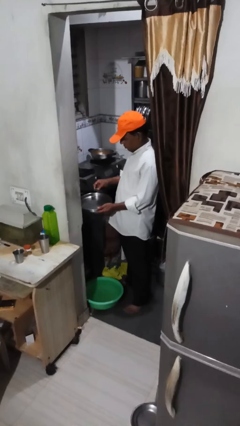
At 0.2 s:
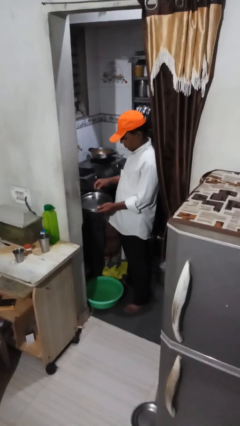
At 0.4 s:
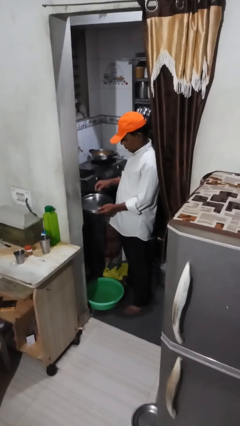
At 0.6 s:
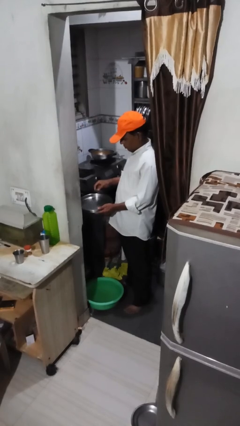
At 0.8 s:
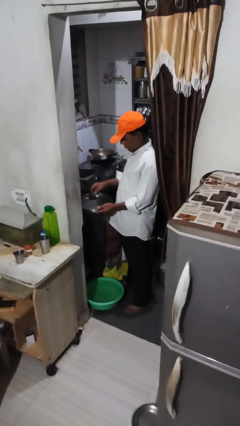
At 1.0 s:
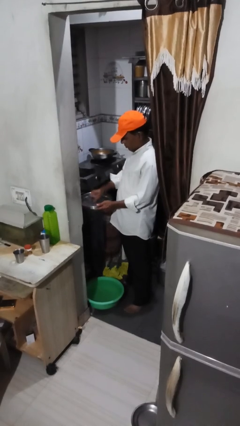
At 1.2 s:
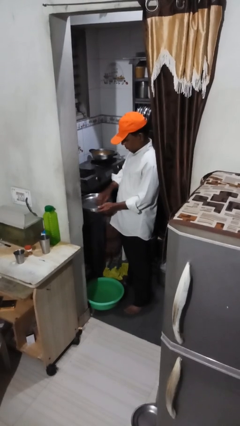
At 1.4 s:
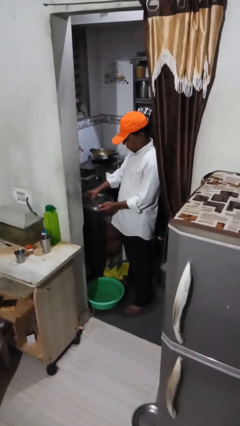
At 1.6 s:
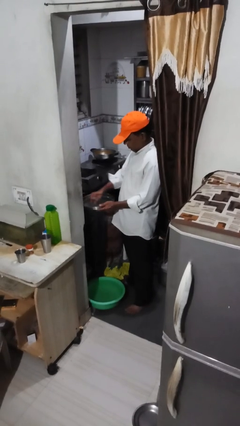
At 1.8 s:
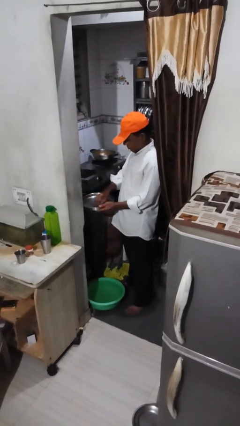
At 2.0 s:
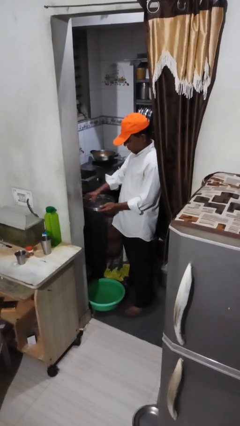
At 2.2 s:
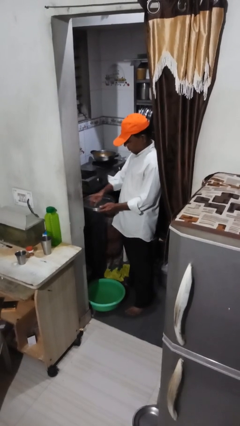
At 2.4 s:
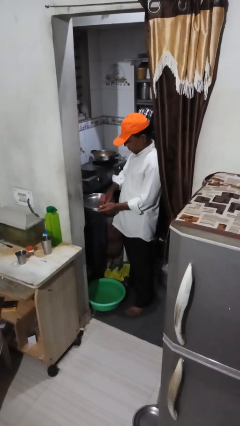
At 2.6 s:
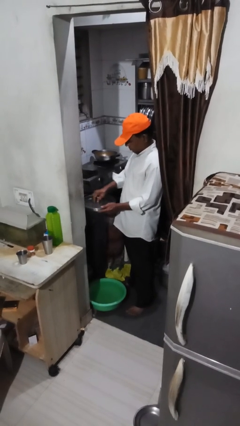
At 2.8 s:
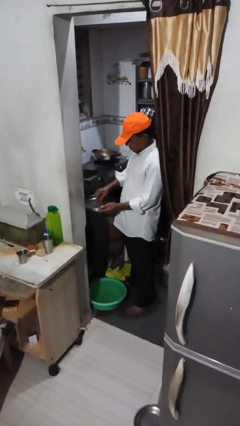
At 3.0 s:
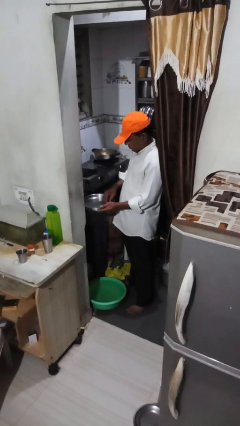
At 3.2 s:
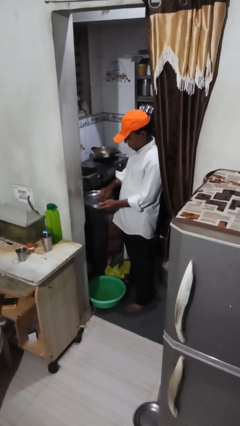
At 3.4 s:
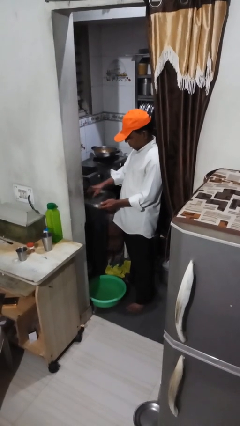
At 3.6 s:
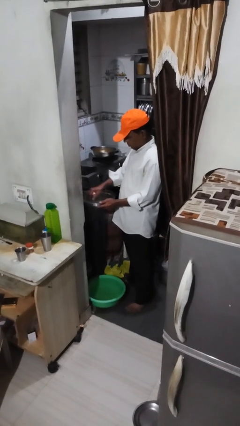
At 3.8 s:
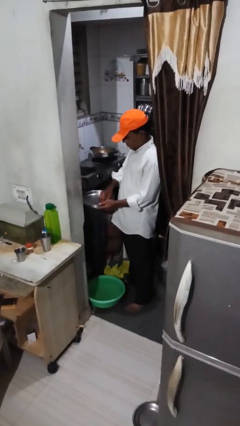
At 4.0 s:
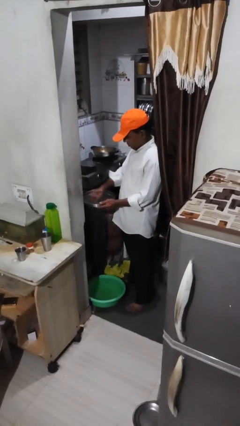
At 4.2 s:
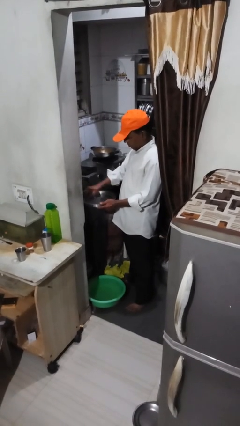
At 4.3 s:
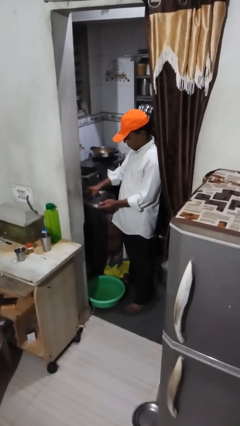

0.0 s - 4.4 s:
person washes dish

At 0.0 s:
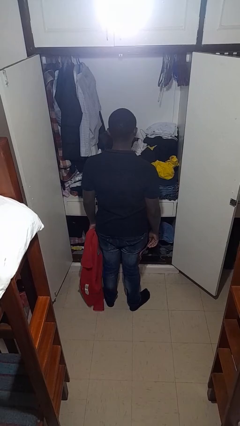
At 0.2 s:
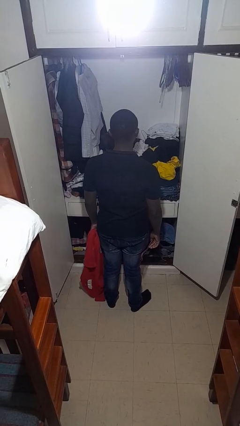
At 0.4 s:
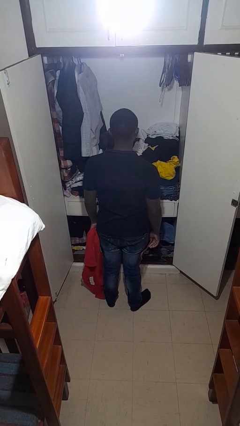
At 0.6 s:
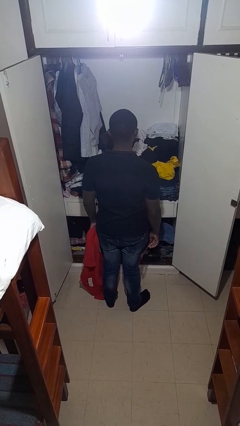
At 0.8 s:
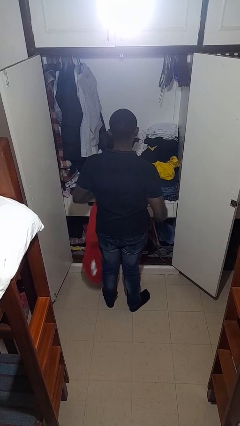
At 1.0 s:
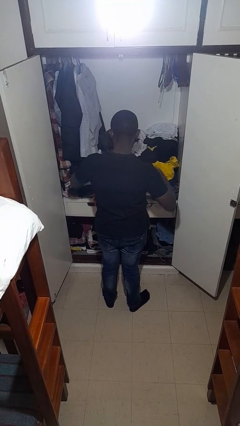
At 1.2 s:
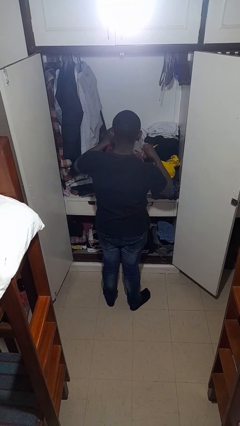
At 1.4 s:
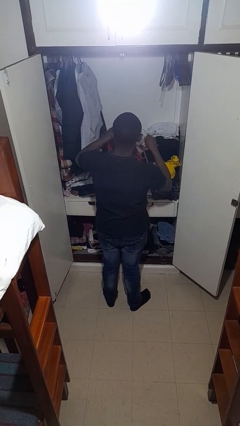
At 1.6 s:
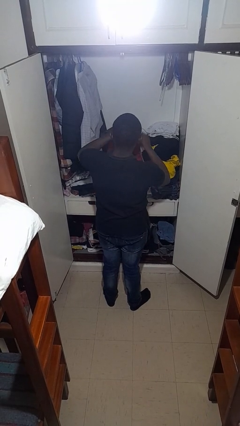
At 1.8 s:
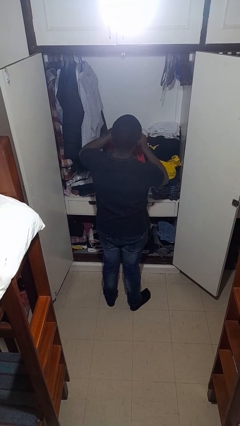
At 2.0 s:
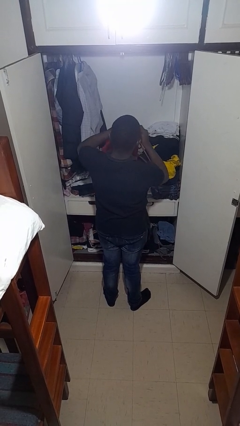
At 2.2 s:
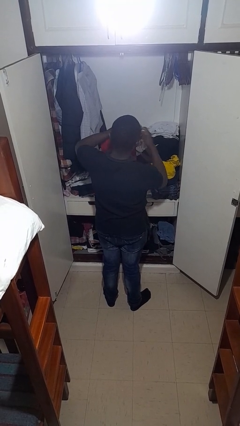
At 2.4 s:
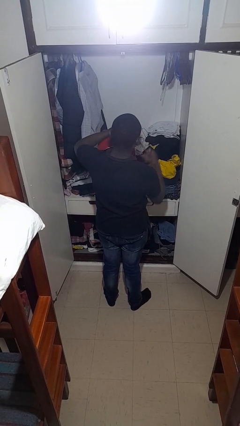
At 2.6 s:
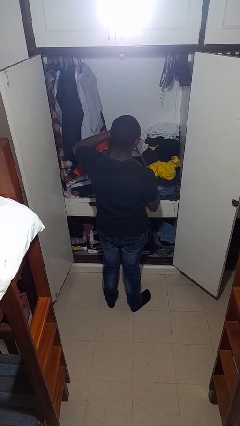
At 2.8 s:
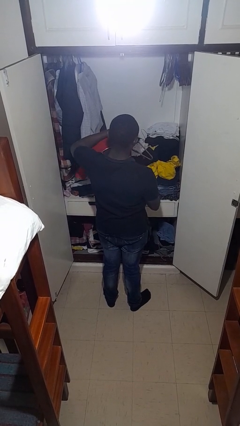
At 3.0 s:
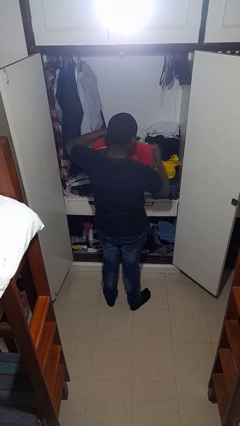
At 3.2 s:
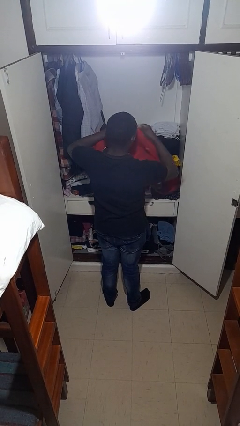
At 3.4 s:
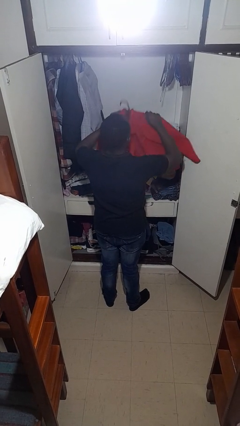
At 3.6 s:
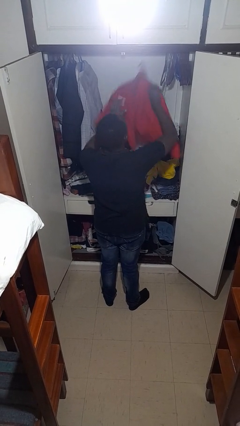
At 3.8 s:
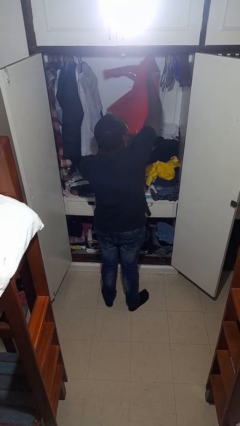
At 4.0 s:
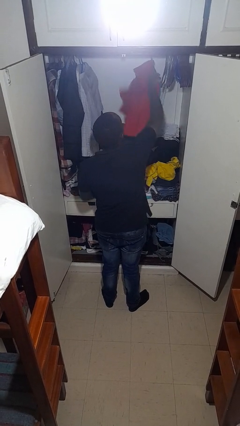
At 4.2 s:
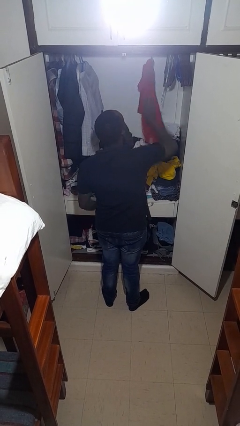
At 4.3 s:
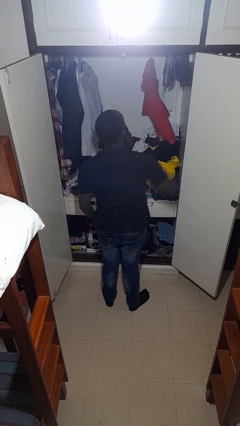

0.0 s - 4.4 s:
person puts clothes into closet

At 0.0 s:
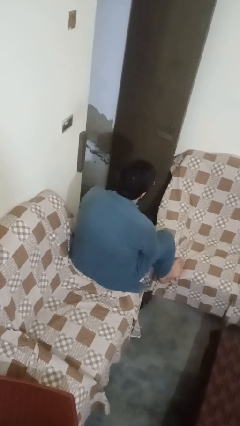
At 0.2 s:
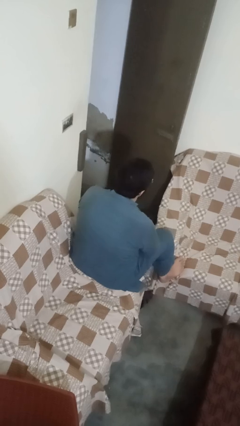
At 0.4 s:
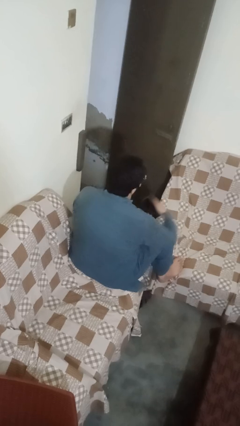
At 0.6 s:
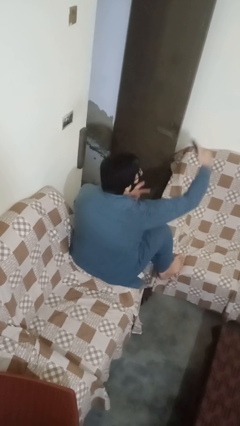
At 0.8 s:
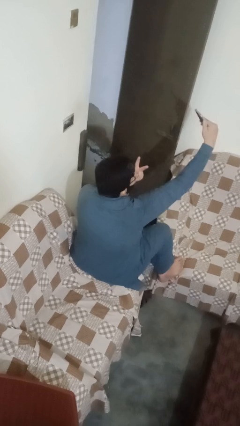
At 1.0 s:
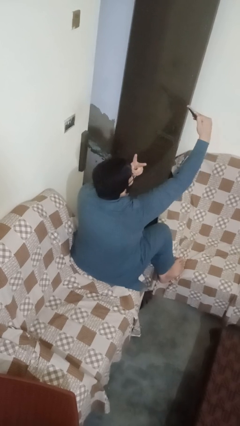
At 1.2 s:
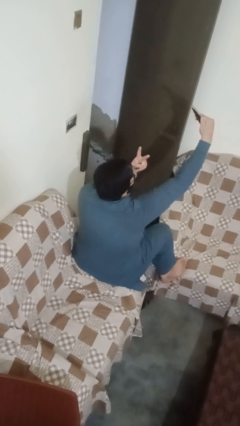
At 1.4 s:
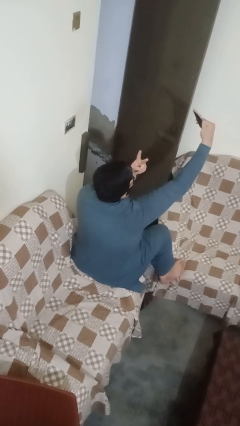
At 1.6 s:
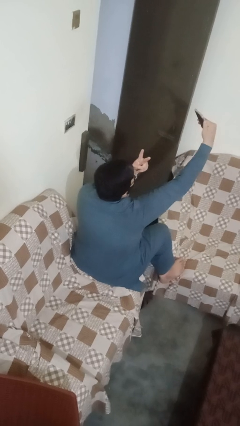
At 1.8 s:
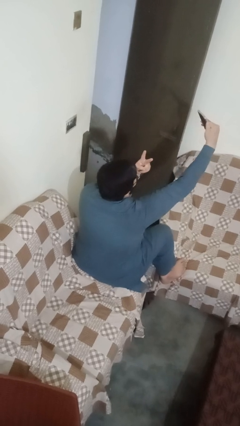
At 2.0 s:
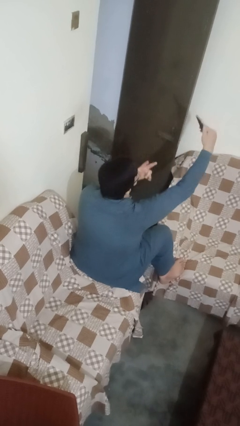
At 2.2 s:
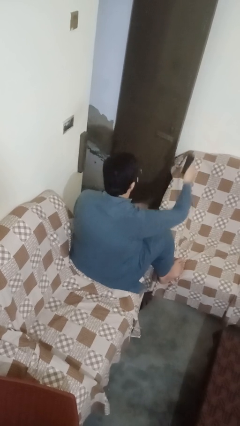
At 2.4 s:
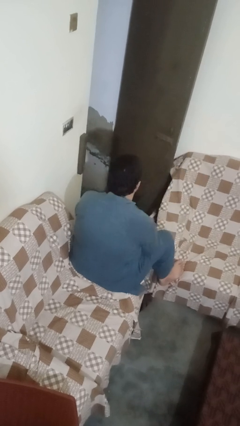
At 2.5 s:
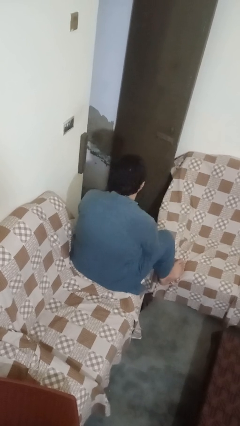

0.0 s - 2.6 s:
person takes selfie

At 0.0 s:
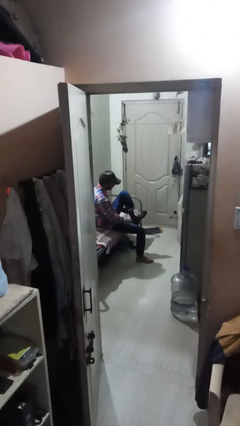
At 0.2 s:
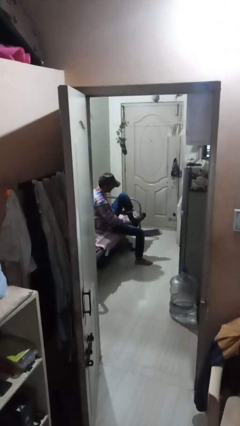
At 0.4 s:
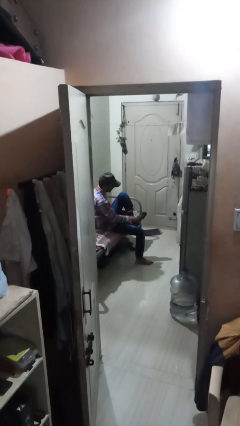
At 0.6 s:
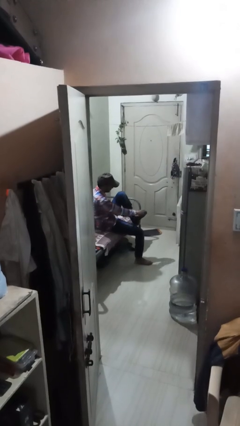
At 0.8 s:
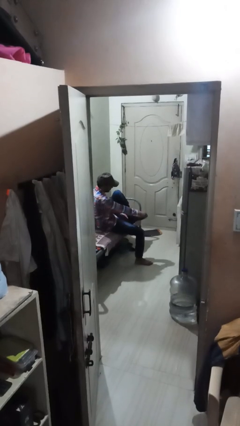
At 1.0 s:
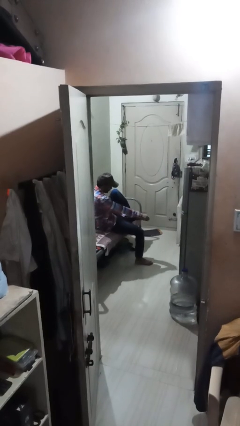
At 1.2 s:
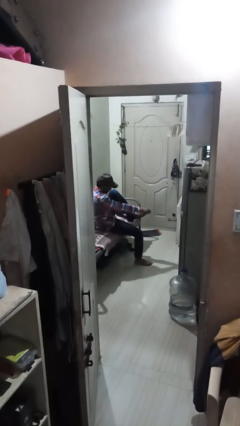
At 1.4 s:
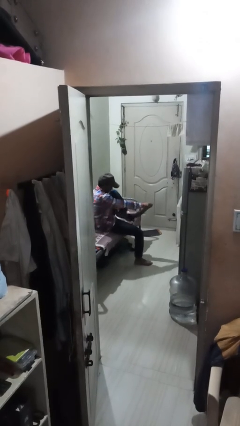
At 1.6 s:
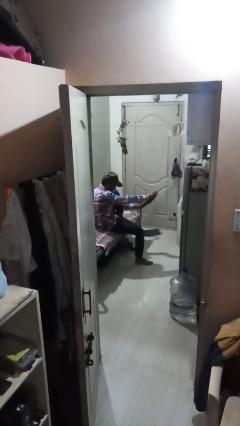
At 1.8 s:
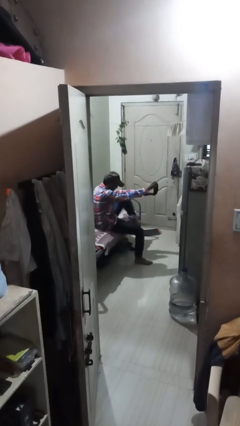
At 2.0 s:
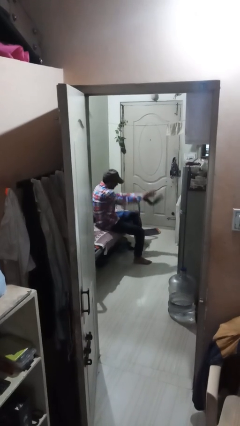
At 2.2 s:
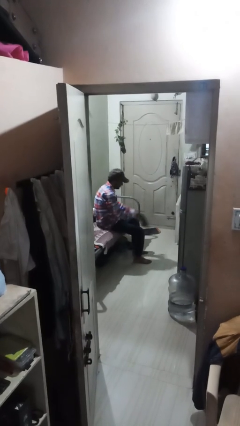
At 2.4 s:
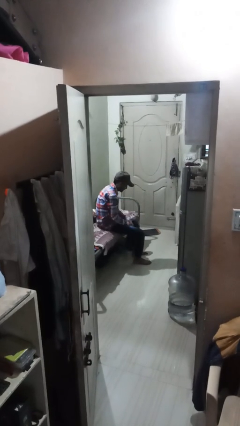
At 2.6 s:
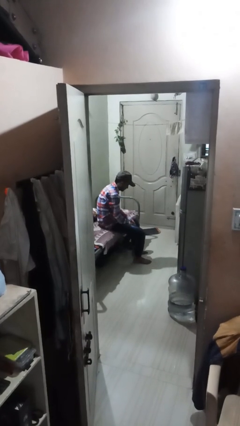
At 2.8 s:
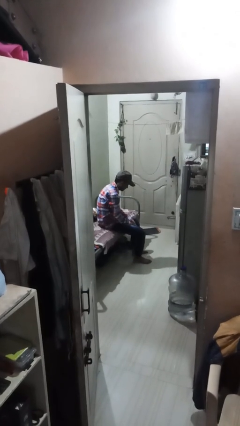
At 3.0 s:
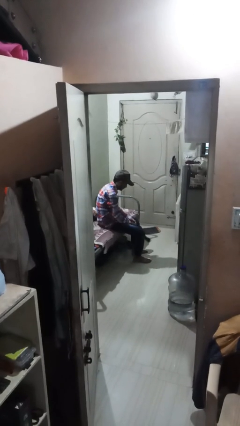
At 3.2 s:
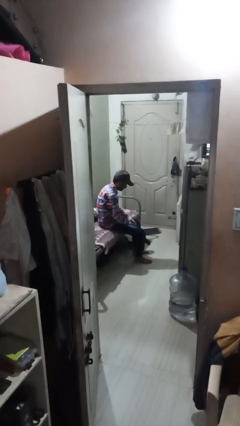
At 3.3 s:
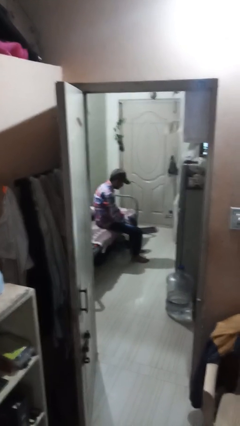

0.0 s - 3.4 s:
person takes off socks

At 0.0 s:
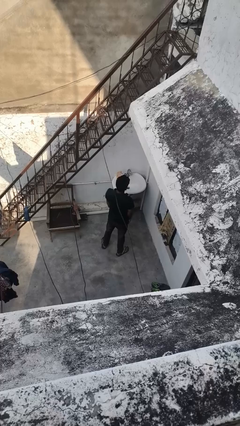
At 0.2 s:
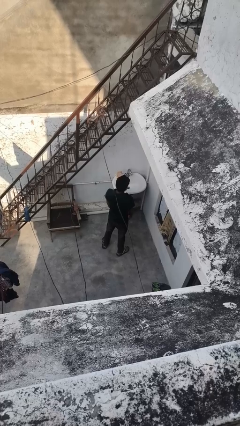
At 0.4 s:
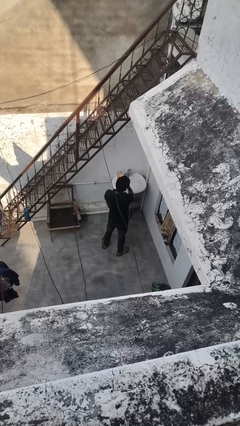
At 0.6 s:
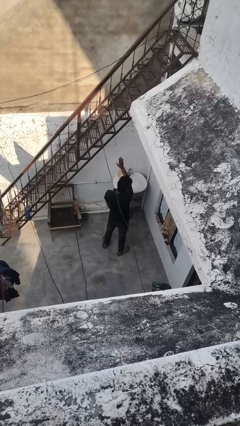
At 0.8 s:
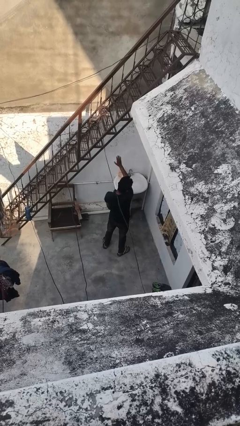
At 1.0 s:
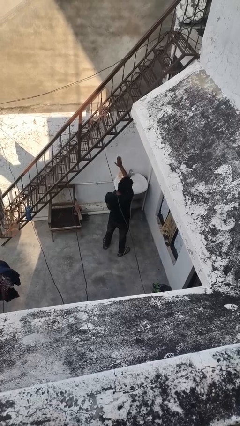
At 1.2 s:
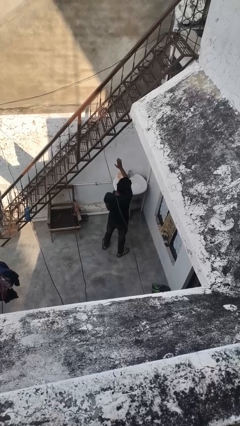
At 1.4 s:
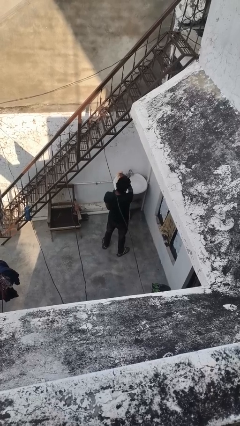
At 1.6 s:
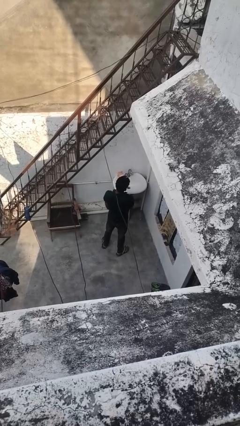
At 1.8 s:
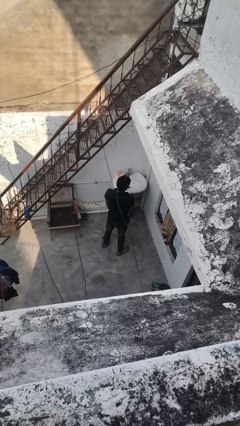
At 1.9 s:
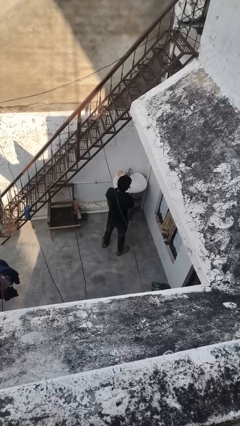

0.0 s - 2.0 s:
person gestures stop
